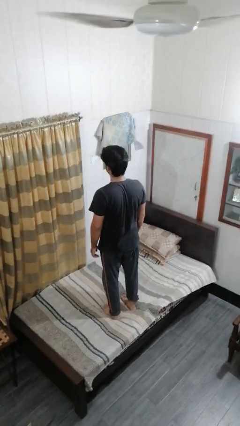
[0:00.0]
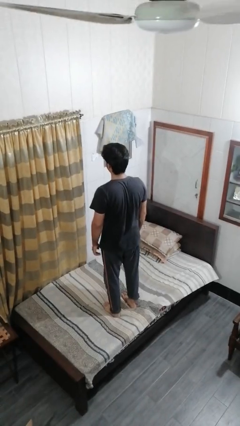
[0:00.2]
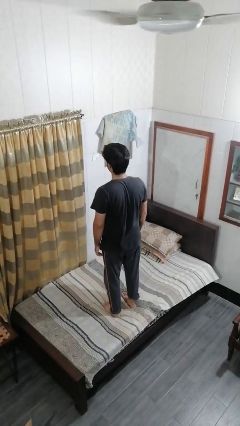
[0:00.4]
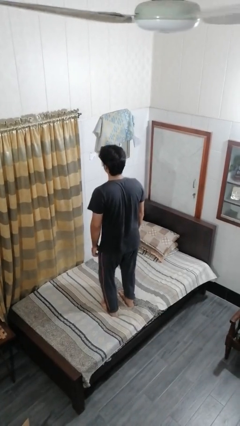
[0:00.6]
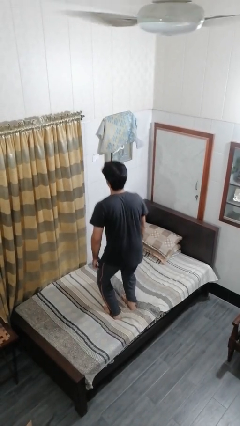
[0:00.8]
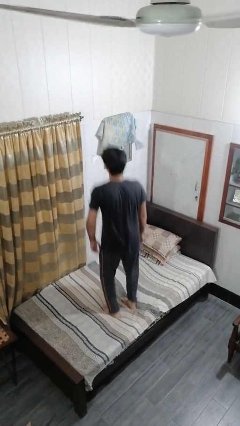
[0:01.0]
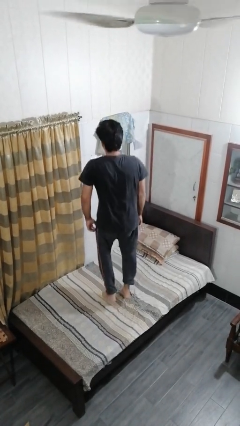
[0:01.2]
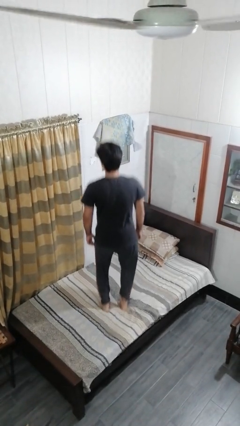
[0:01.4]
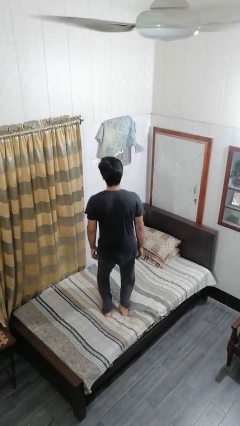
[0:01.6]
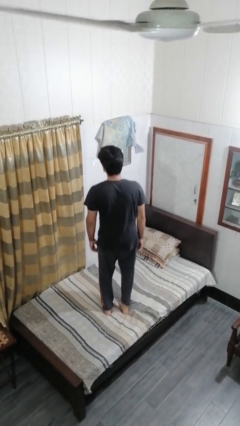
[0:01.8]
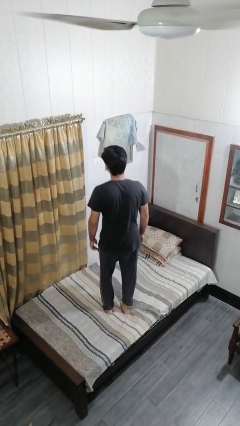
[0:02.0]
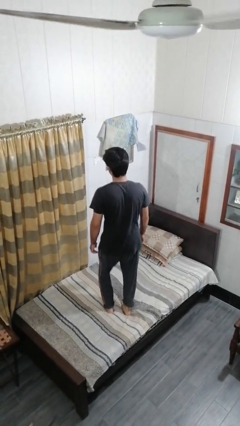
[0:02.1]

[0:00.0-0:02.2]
person jumps on bed

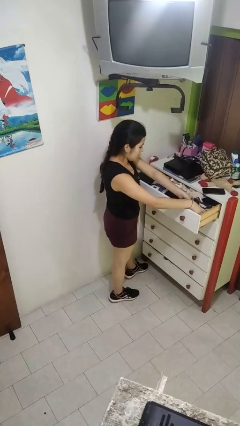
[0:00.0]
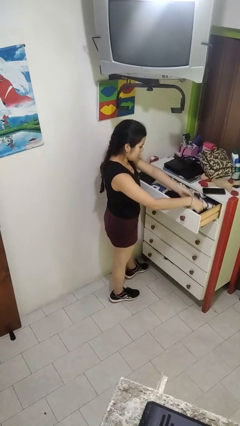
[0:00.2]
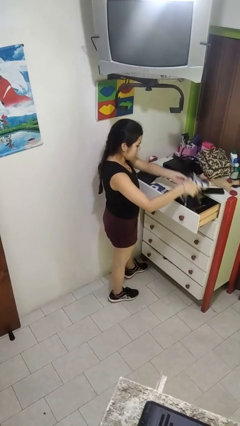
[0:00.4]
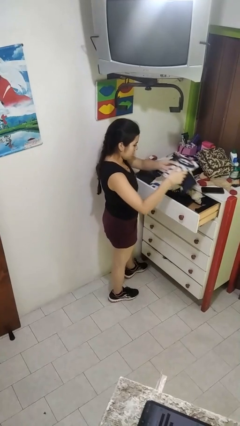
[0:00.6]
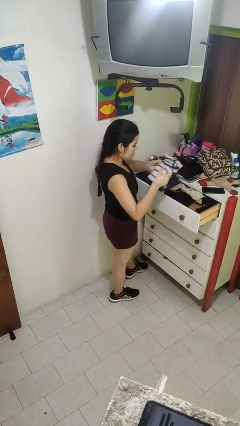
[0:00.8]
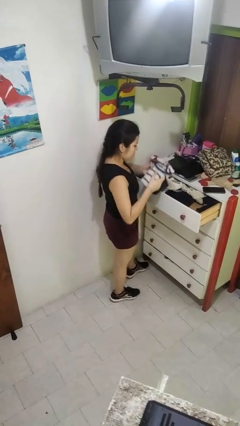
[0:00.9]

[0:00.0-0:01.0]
person takes clothes from dresser

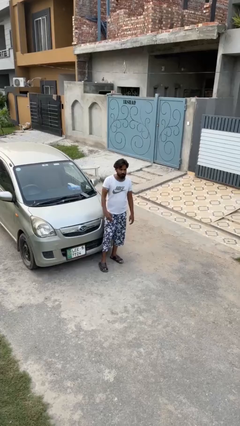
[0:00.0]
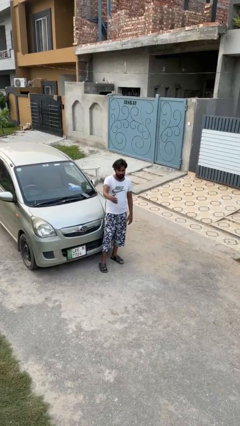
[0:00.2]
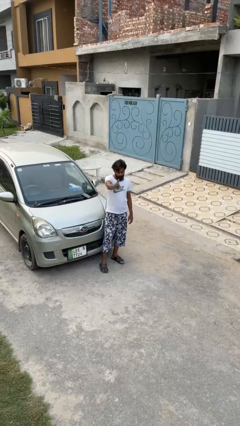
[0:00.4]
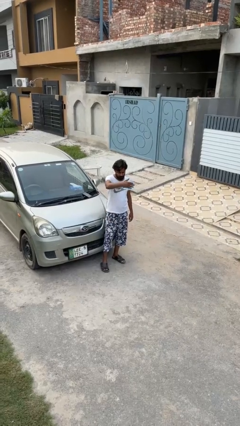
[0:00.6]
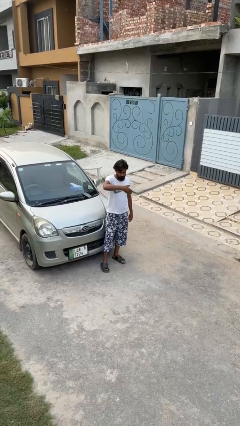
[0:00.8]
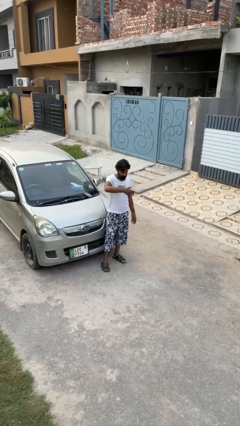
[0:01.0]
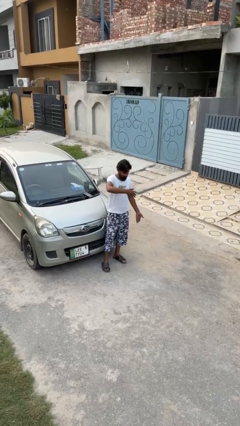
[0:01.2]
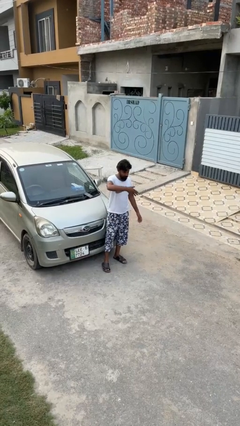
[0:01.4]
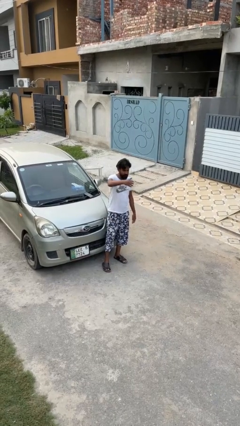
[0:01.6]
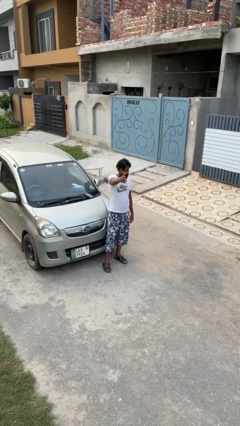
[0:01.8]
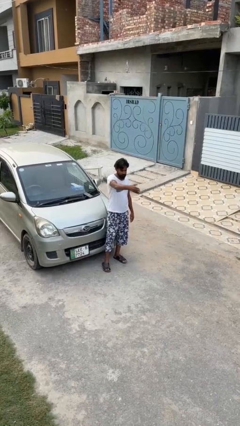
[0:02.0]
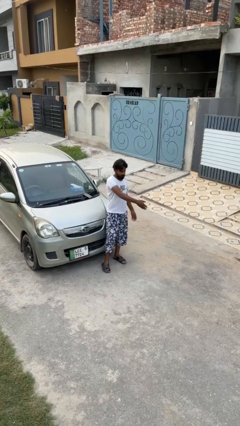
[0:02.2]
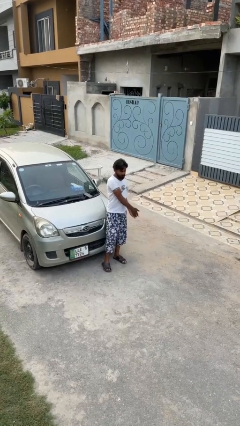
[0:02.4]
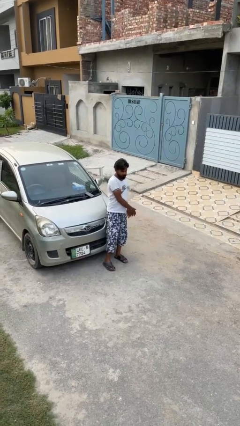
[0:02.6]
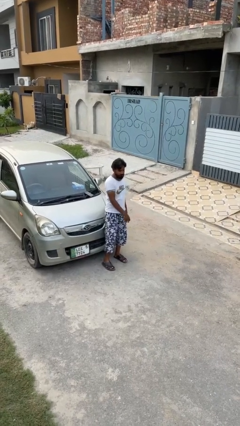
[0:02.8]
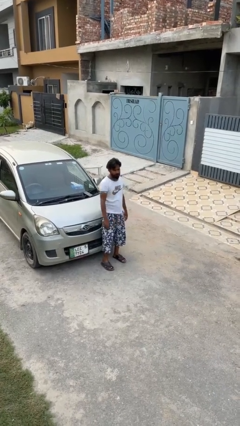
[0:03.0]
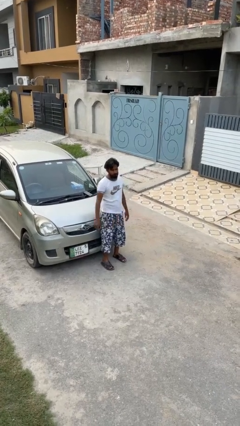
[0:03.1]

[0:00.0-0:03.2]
person gestures come here

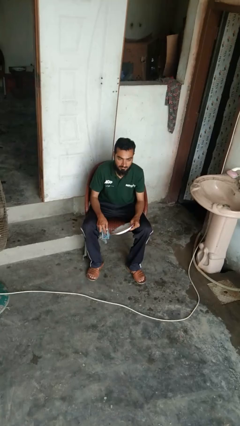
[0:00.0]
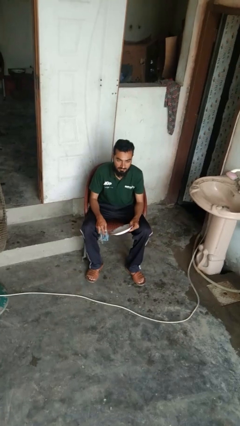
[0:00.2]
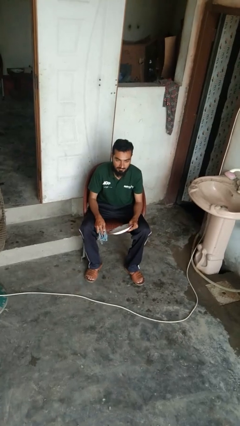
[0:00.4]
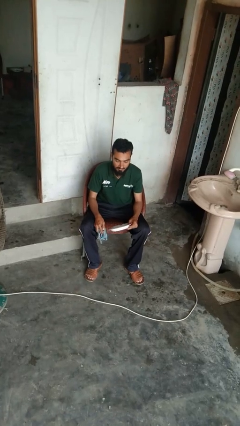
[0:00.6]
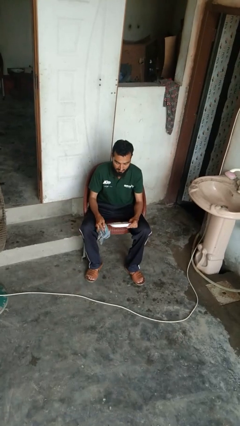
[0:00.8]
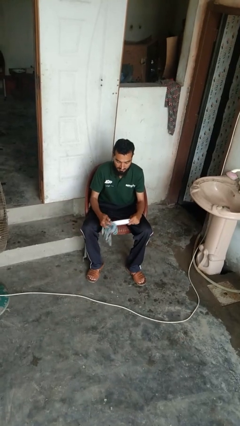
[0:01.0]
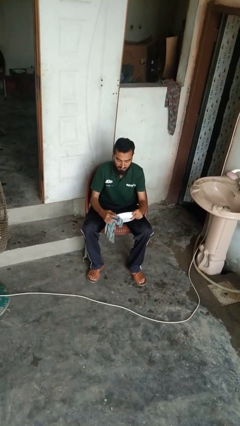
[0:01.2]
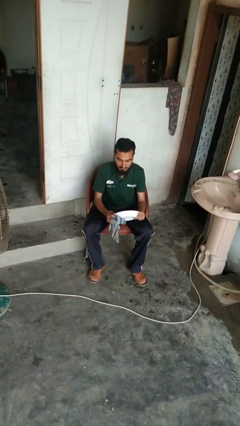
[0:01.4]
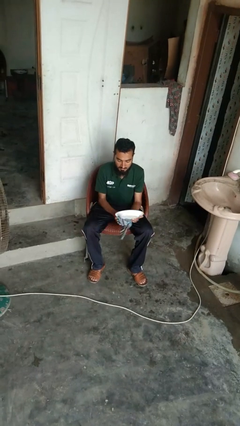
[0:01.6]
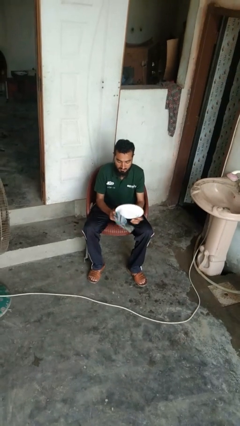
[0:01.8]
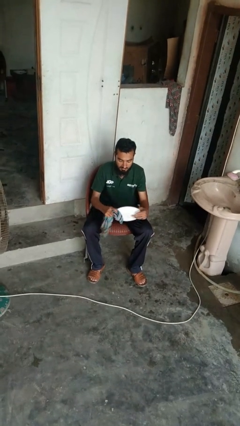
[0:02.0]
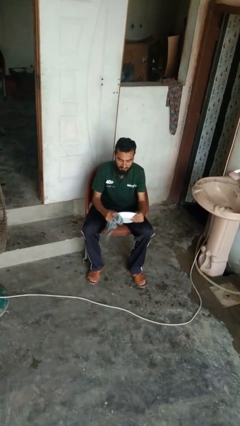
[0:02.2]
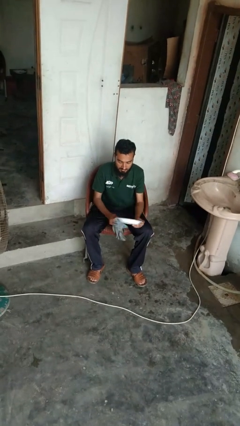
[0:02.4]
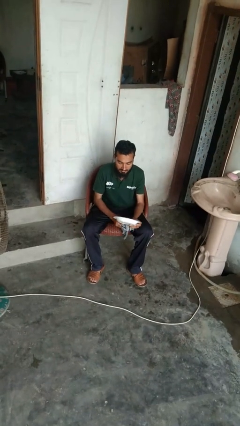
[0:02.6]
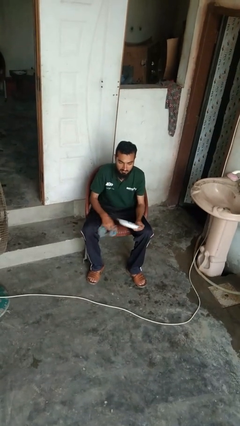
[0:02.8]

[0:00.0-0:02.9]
person dries dish

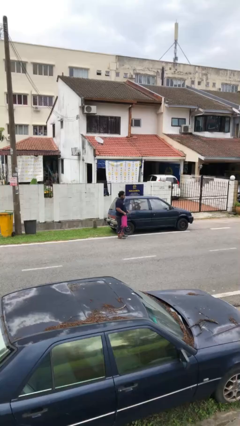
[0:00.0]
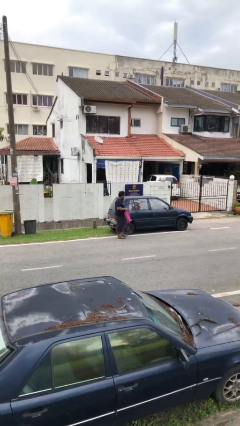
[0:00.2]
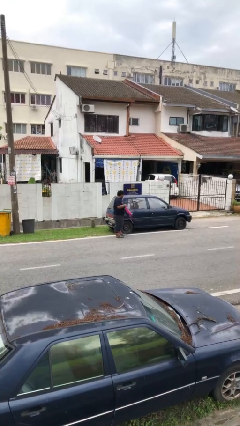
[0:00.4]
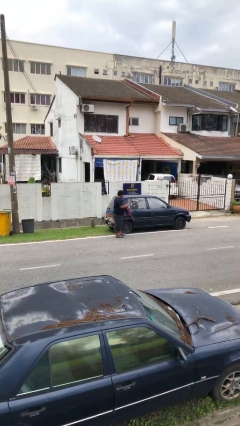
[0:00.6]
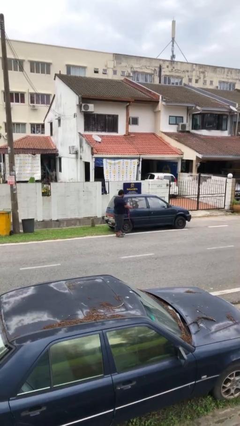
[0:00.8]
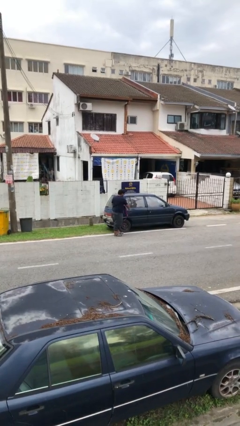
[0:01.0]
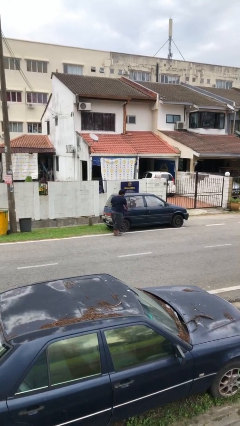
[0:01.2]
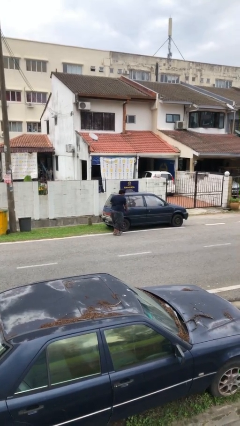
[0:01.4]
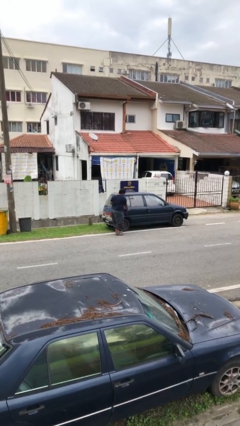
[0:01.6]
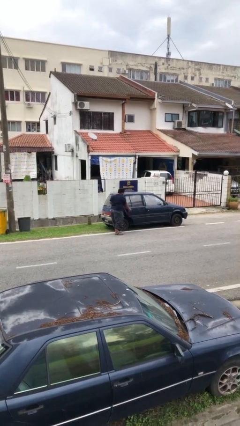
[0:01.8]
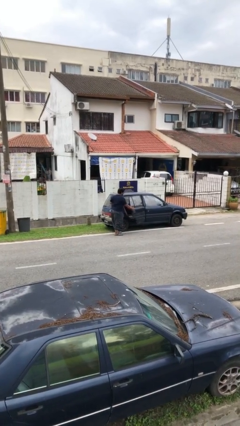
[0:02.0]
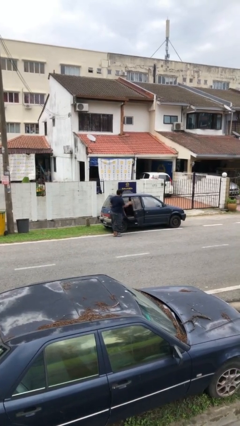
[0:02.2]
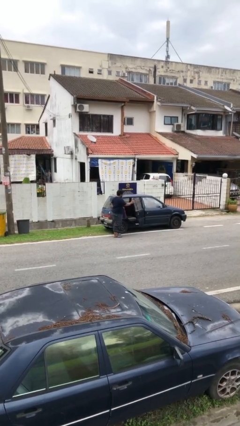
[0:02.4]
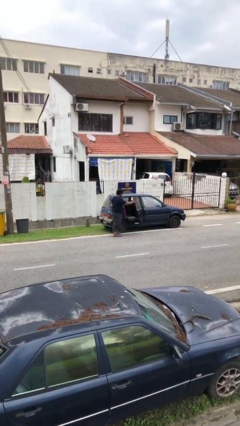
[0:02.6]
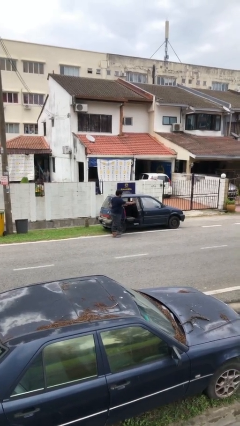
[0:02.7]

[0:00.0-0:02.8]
person opens car door

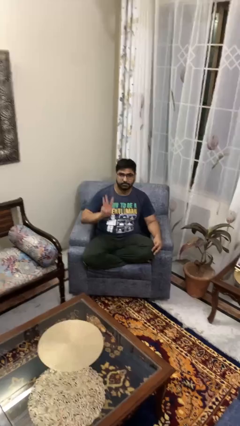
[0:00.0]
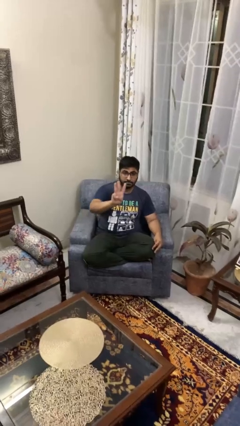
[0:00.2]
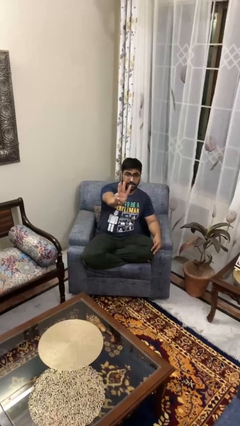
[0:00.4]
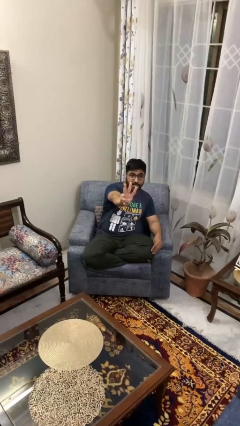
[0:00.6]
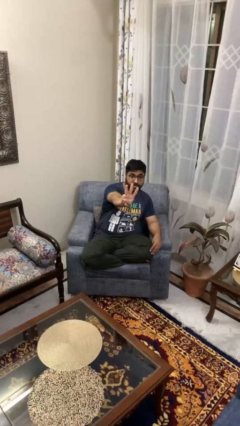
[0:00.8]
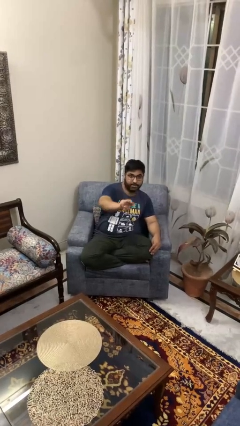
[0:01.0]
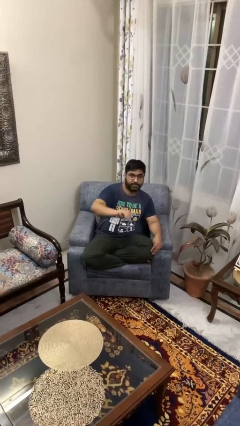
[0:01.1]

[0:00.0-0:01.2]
person gestures number three

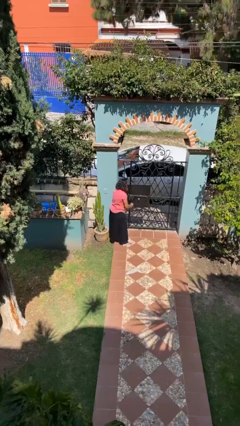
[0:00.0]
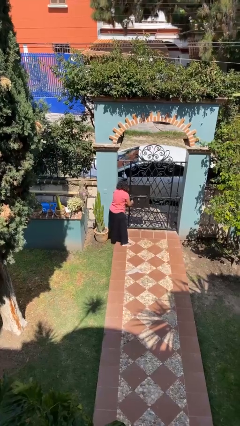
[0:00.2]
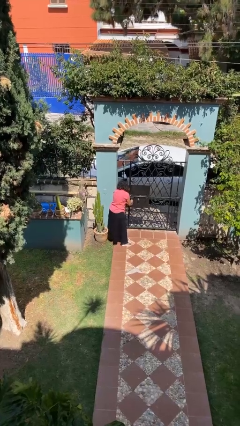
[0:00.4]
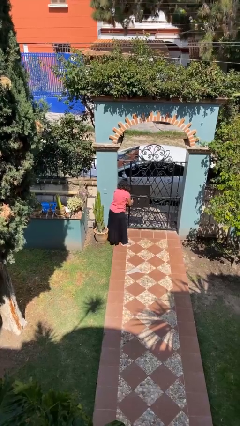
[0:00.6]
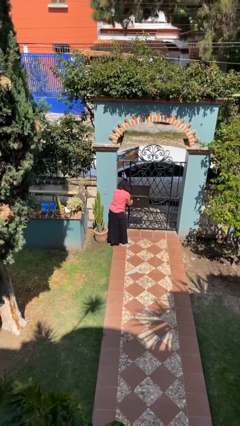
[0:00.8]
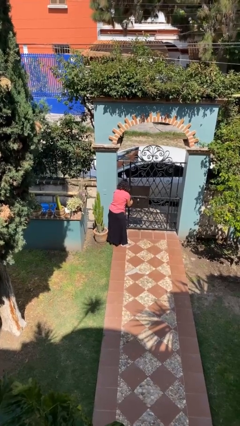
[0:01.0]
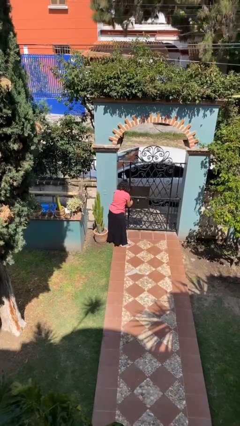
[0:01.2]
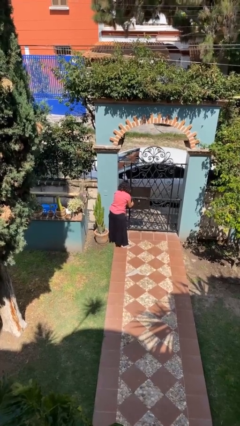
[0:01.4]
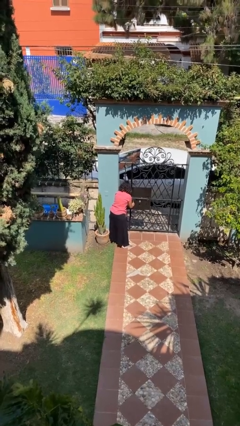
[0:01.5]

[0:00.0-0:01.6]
person unlocks door with keys

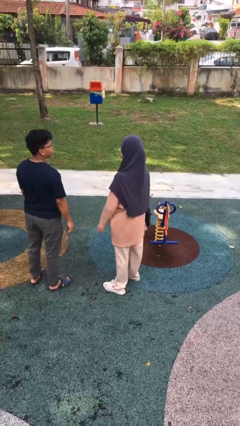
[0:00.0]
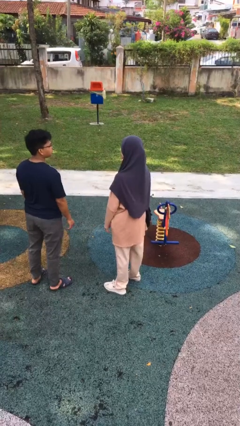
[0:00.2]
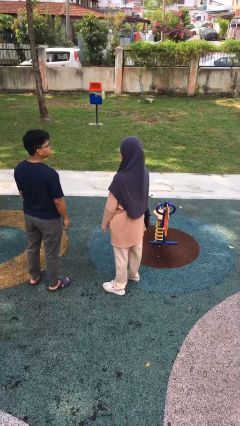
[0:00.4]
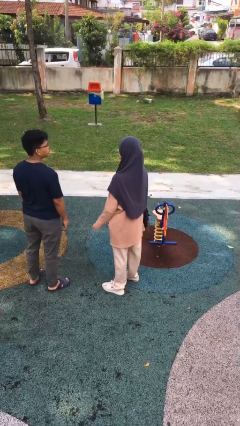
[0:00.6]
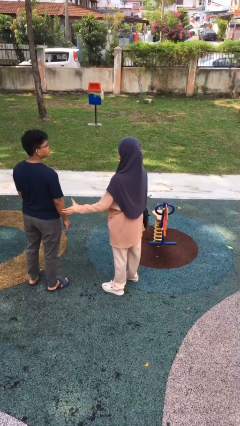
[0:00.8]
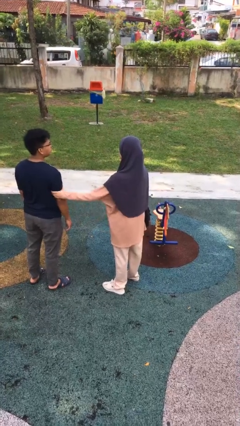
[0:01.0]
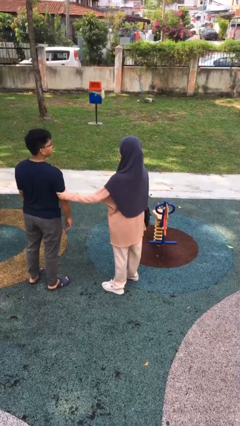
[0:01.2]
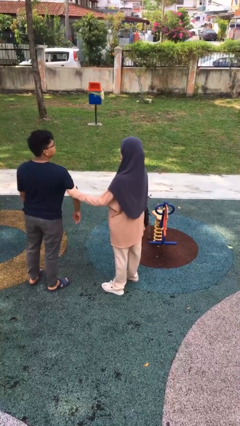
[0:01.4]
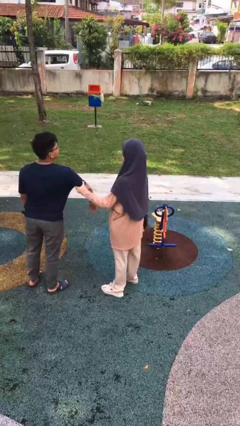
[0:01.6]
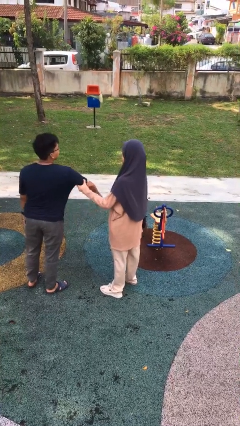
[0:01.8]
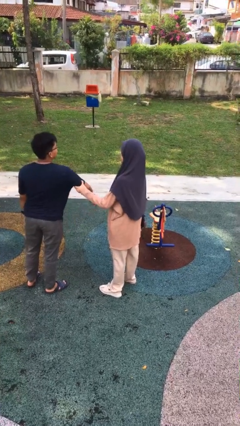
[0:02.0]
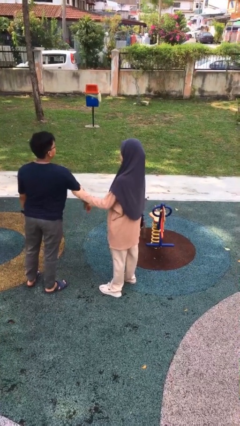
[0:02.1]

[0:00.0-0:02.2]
person grabs person by bicep

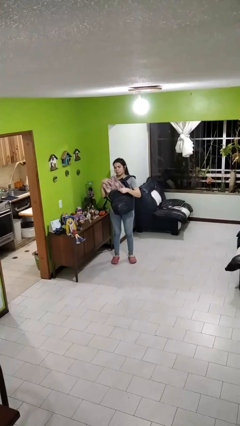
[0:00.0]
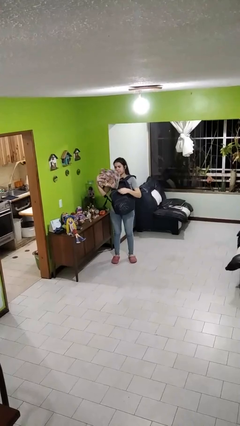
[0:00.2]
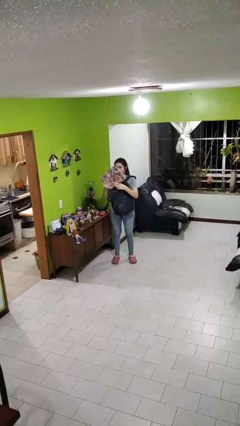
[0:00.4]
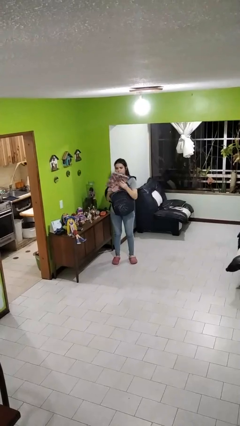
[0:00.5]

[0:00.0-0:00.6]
person takes object from backpack
